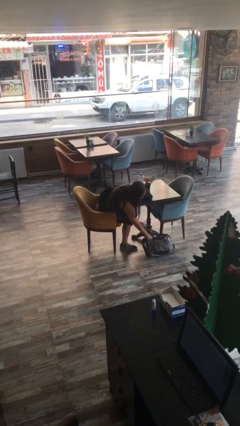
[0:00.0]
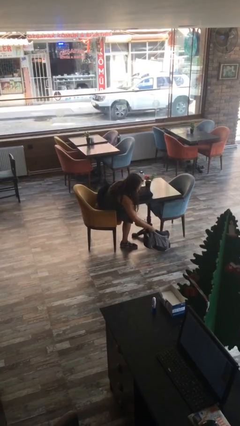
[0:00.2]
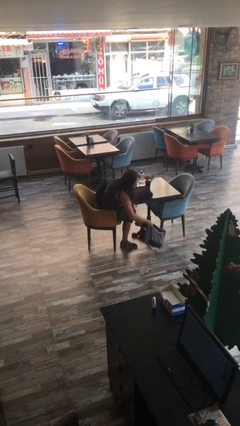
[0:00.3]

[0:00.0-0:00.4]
person picks up object from floor

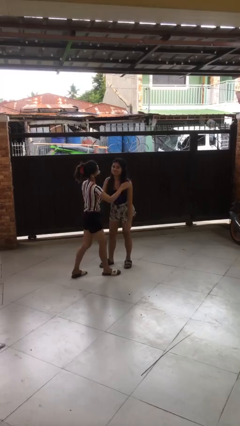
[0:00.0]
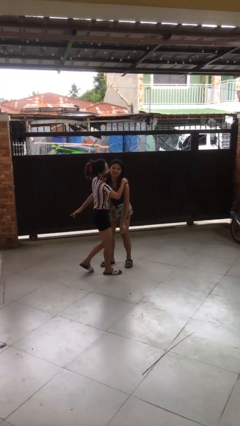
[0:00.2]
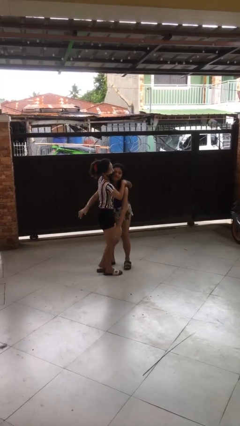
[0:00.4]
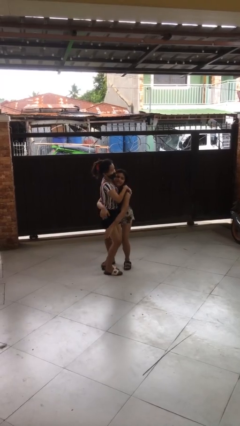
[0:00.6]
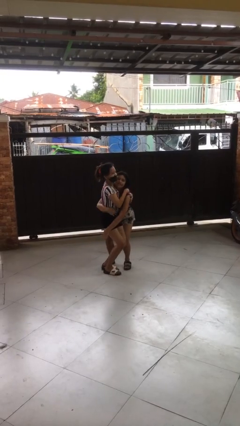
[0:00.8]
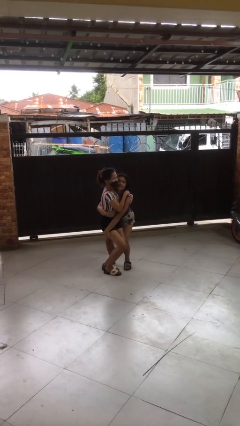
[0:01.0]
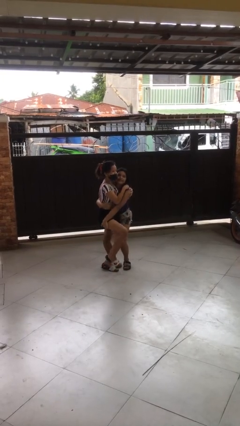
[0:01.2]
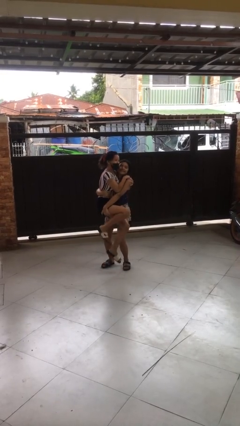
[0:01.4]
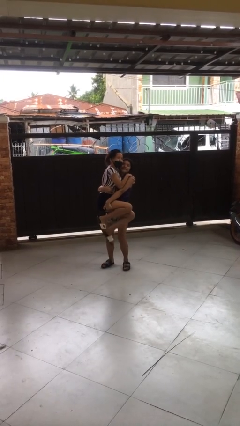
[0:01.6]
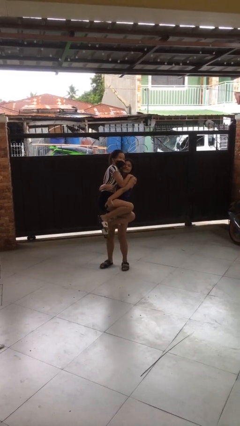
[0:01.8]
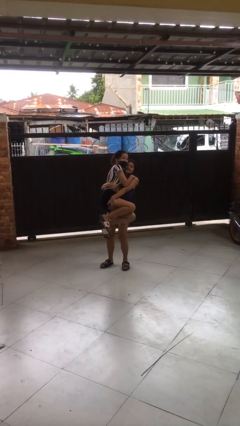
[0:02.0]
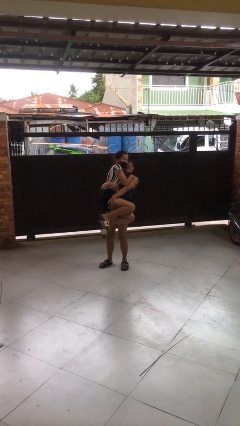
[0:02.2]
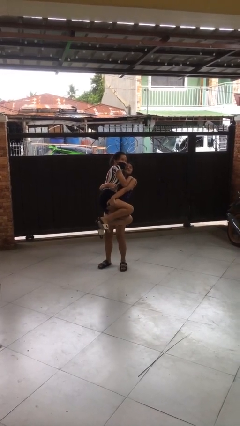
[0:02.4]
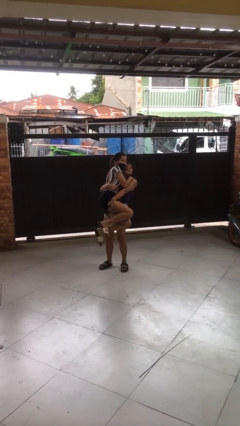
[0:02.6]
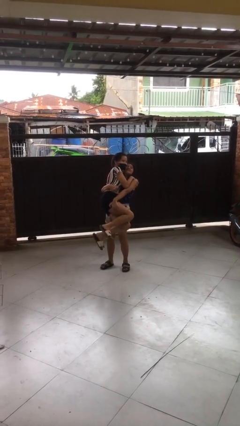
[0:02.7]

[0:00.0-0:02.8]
person picks up person

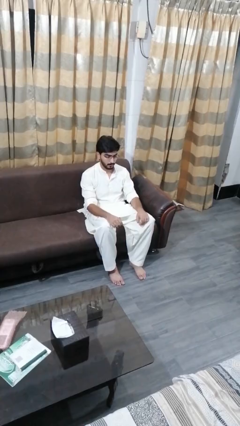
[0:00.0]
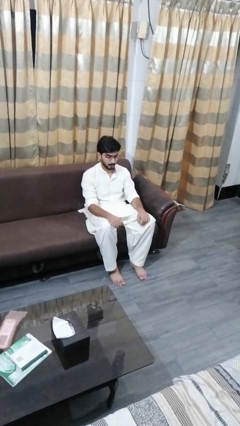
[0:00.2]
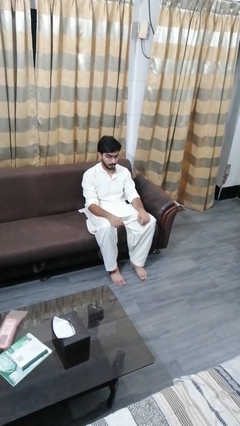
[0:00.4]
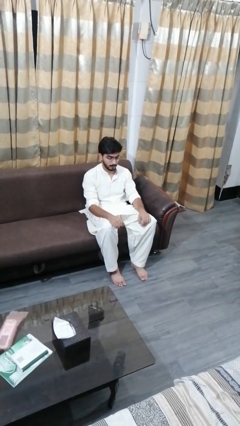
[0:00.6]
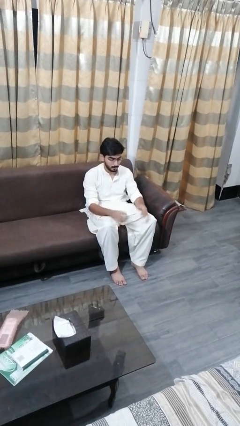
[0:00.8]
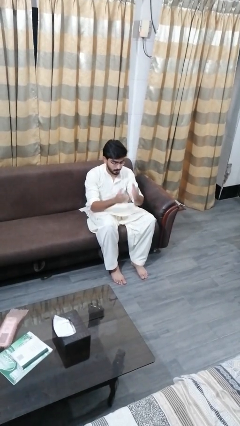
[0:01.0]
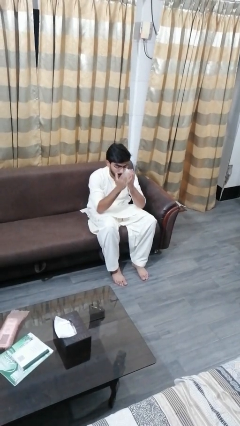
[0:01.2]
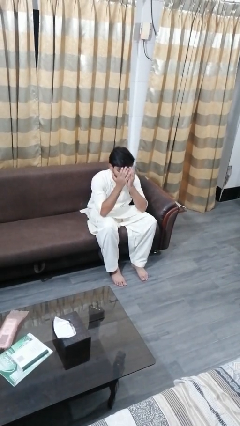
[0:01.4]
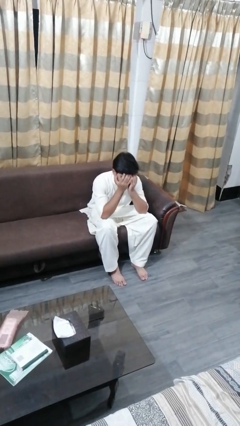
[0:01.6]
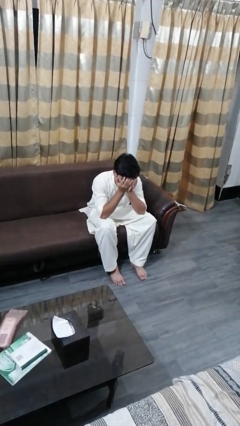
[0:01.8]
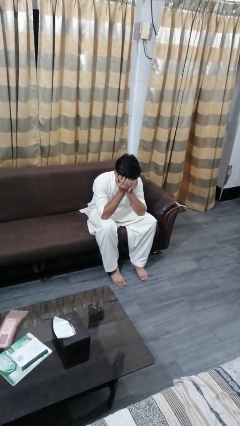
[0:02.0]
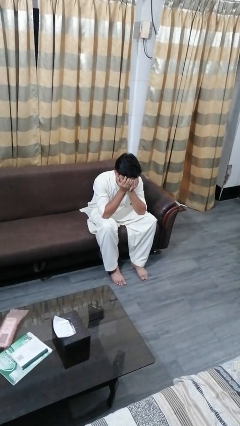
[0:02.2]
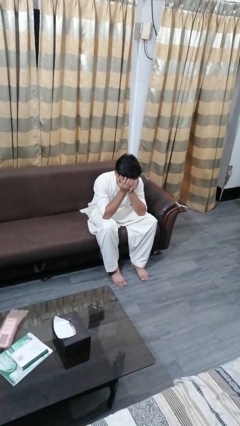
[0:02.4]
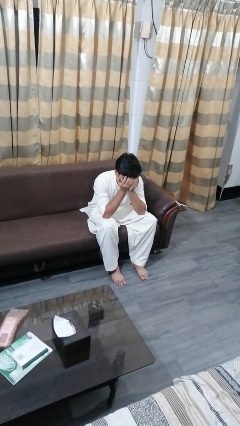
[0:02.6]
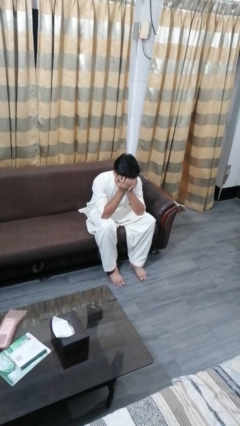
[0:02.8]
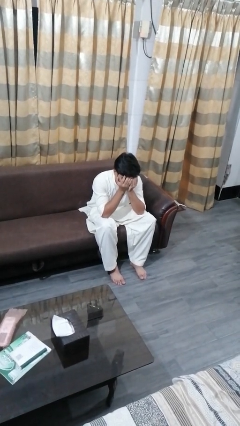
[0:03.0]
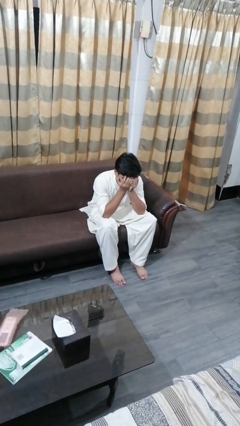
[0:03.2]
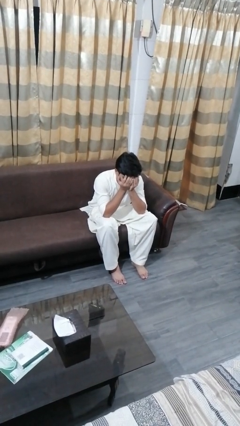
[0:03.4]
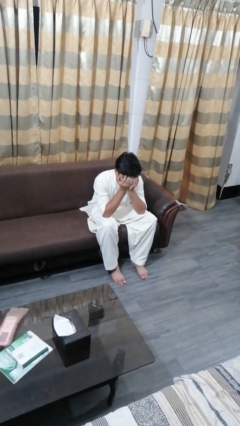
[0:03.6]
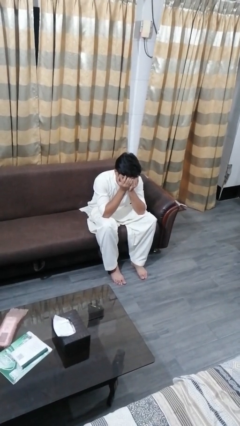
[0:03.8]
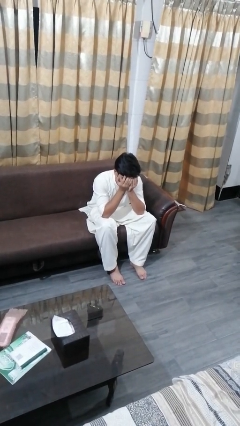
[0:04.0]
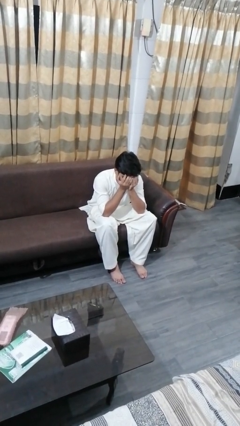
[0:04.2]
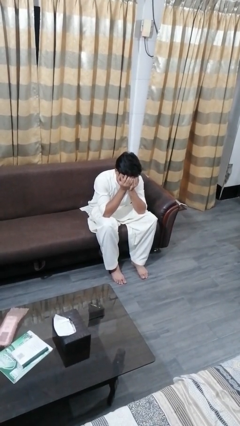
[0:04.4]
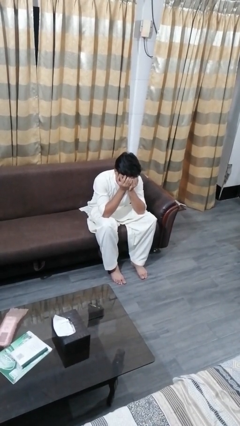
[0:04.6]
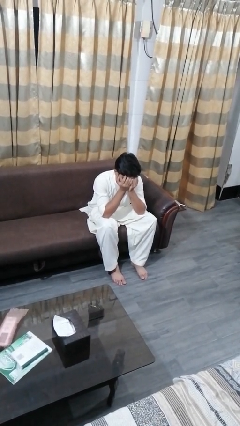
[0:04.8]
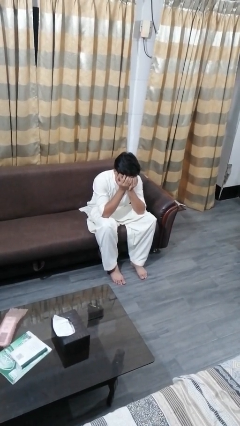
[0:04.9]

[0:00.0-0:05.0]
person covers face with hands

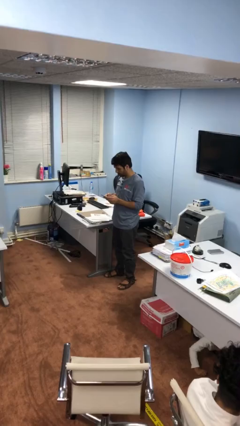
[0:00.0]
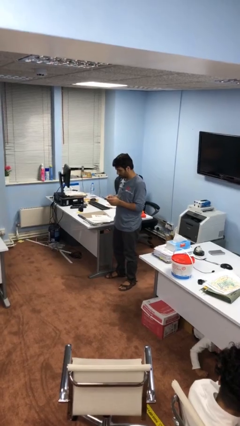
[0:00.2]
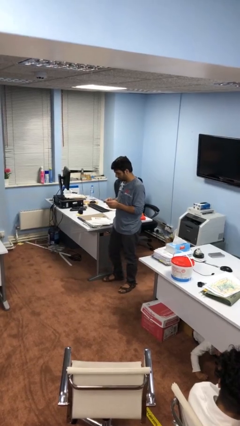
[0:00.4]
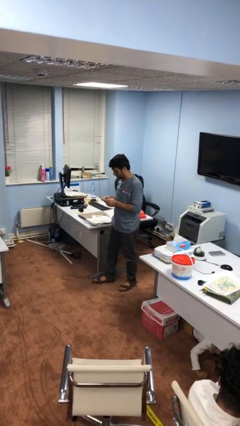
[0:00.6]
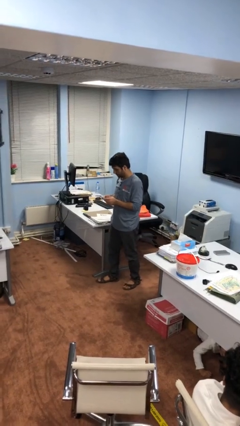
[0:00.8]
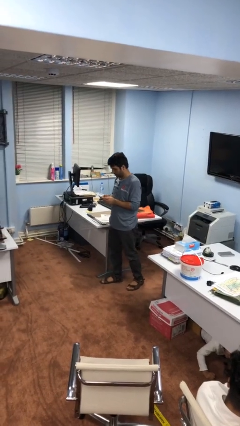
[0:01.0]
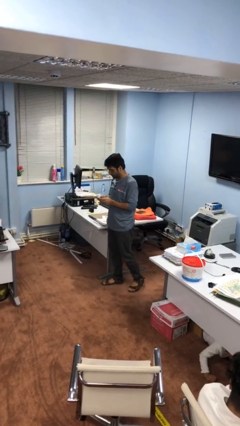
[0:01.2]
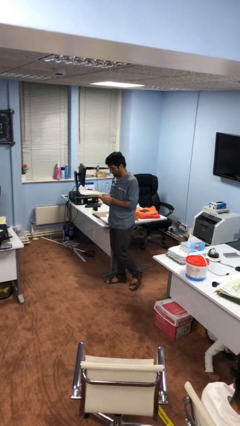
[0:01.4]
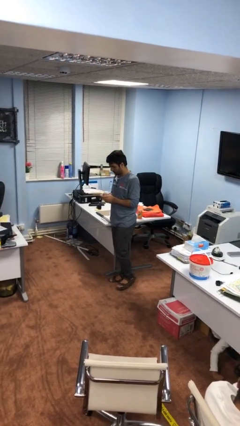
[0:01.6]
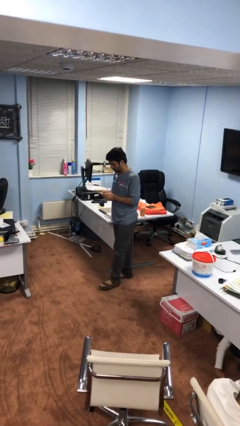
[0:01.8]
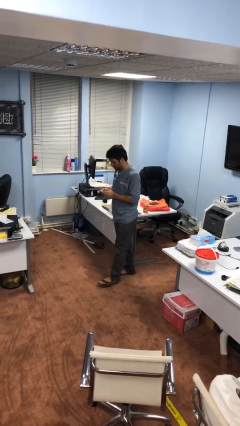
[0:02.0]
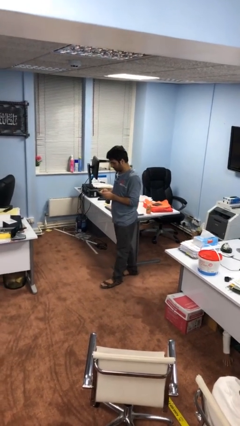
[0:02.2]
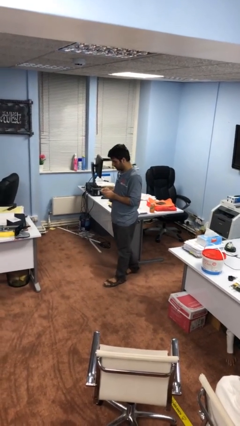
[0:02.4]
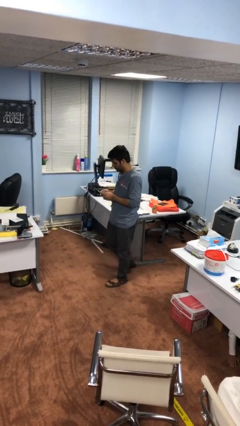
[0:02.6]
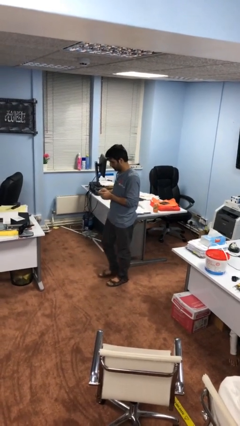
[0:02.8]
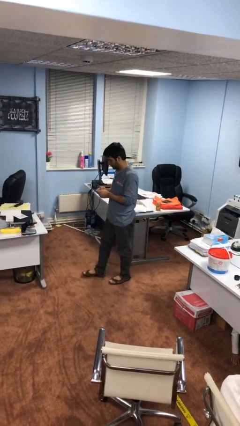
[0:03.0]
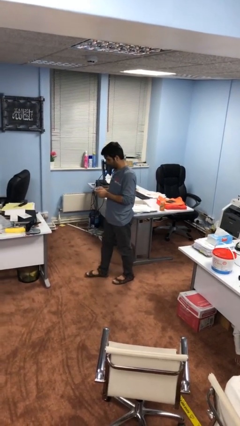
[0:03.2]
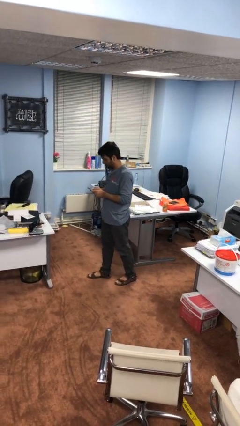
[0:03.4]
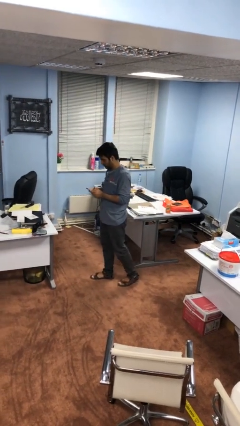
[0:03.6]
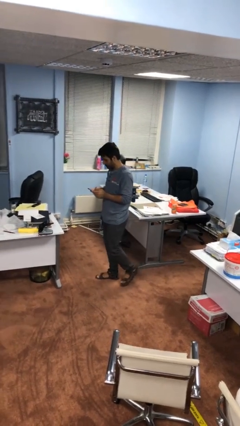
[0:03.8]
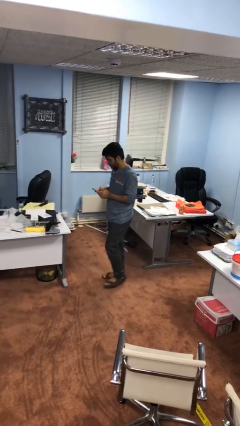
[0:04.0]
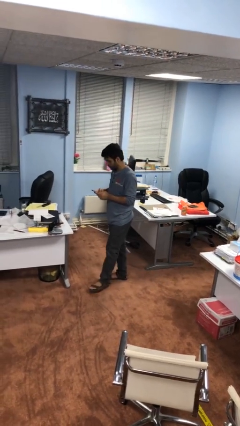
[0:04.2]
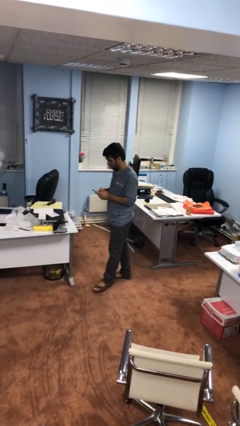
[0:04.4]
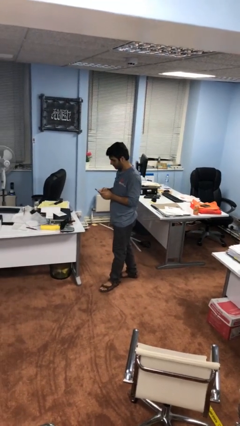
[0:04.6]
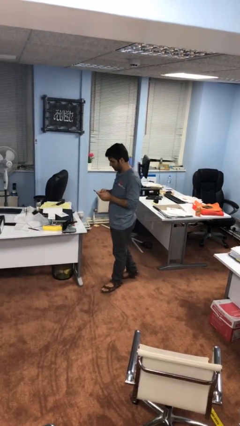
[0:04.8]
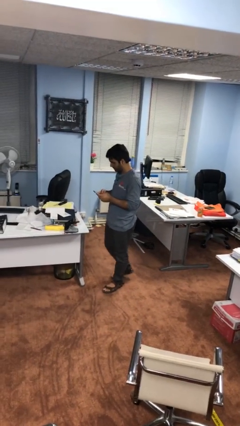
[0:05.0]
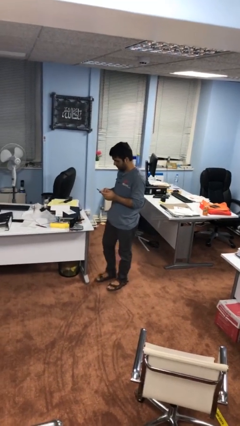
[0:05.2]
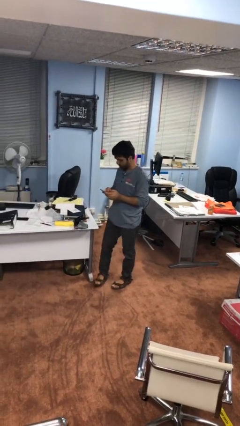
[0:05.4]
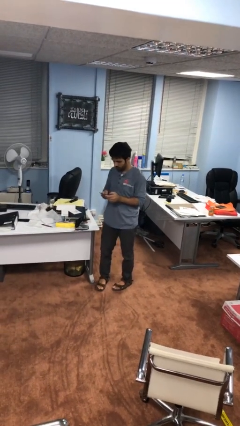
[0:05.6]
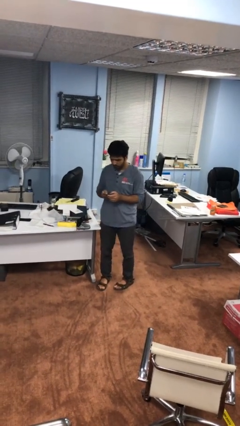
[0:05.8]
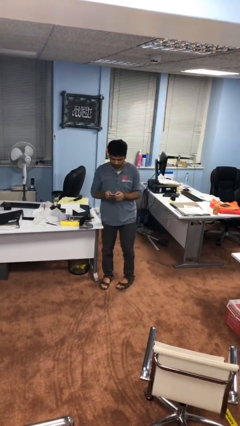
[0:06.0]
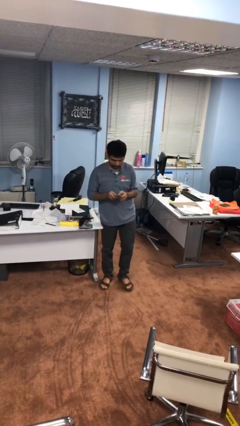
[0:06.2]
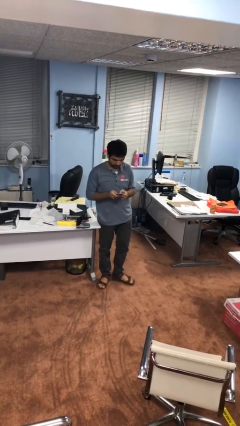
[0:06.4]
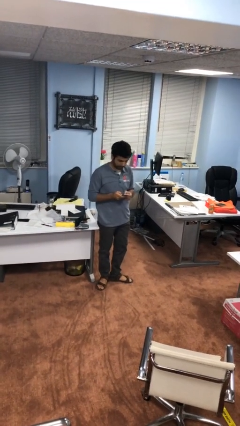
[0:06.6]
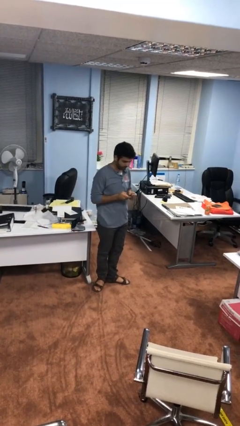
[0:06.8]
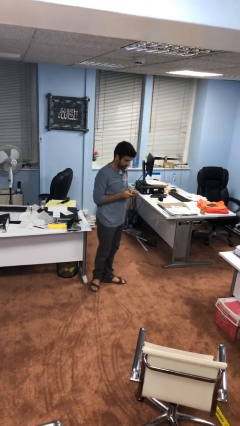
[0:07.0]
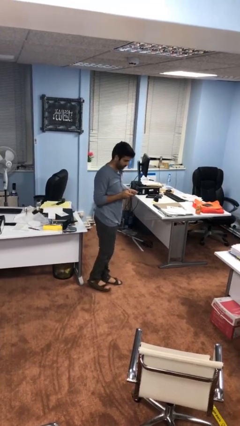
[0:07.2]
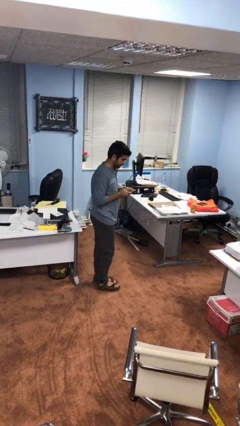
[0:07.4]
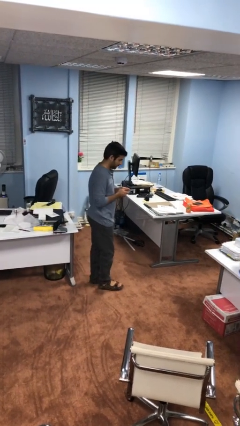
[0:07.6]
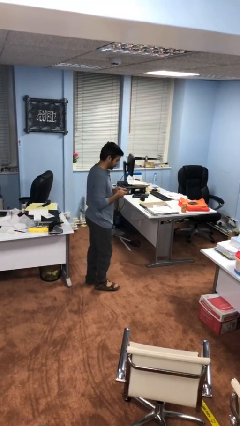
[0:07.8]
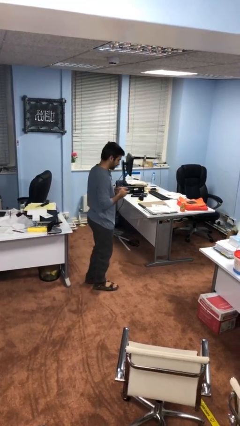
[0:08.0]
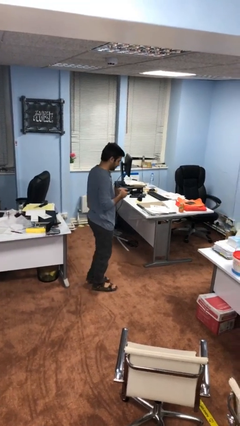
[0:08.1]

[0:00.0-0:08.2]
person texts on phone

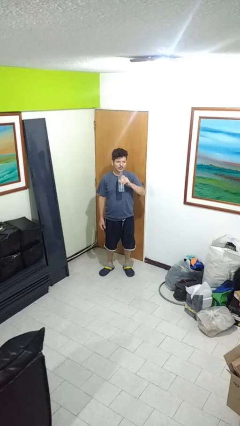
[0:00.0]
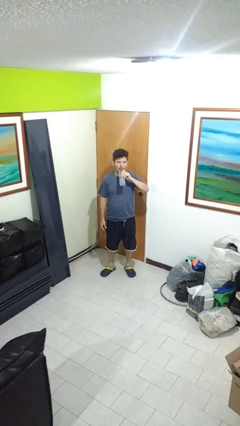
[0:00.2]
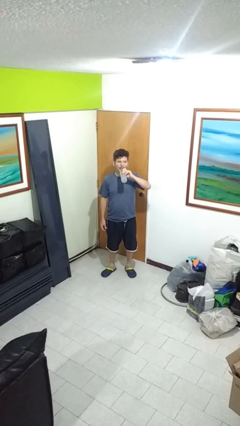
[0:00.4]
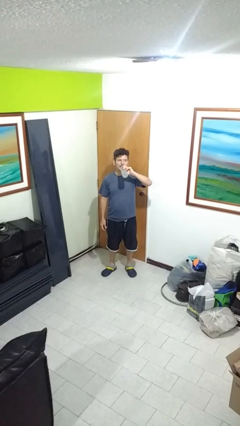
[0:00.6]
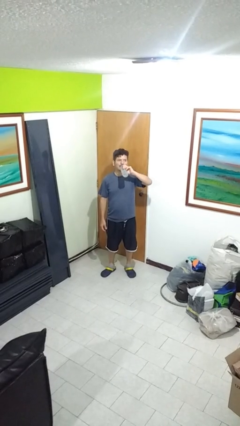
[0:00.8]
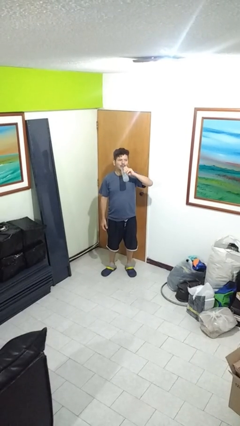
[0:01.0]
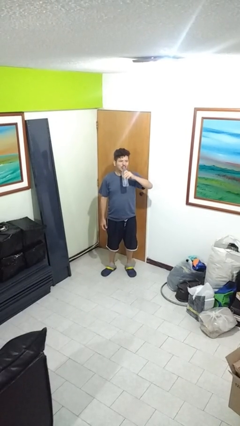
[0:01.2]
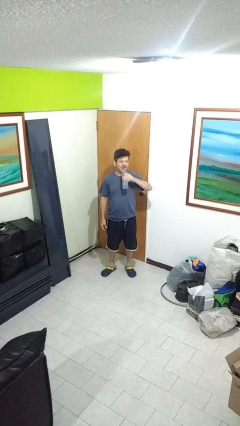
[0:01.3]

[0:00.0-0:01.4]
person drinks from bottle
